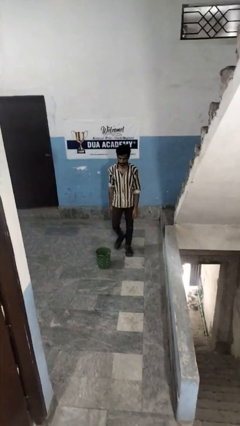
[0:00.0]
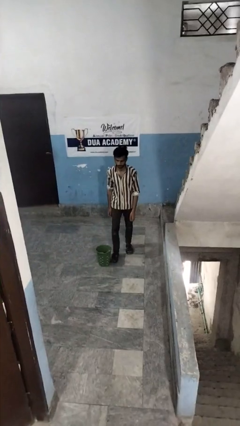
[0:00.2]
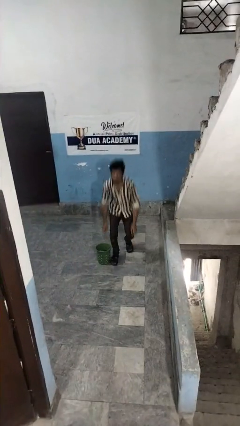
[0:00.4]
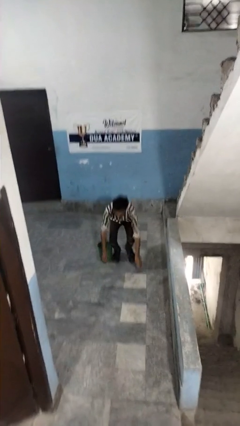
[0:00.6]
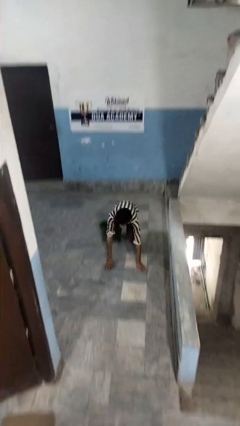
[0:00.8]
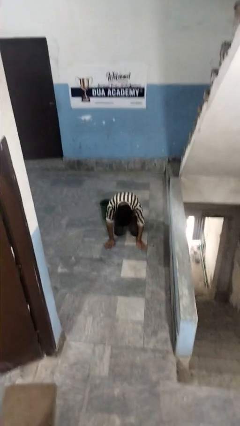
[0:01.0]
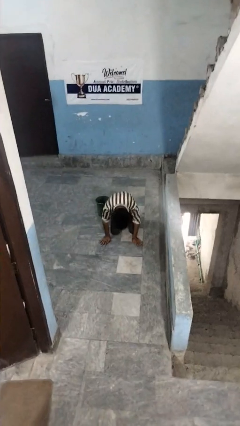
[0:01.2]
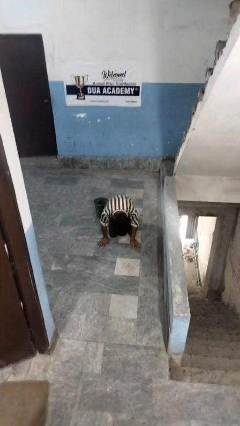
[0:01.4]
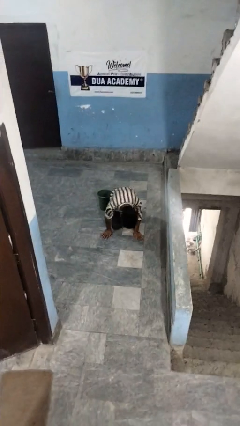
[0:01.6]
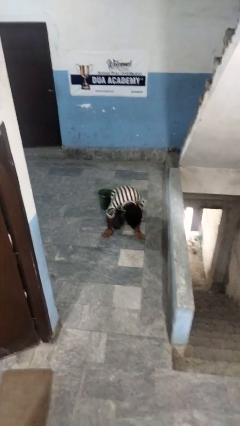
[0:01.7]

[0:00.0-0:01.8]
person trips on object on floor

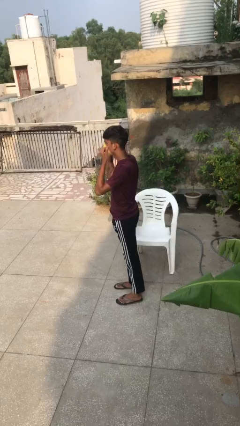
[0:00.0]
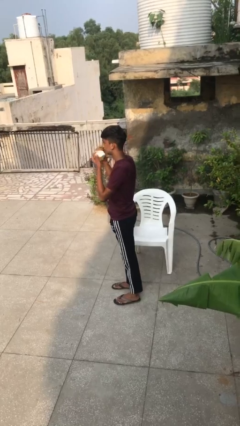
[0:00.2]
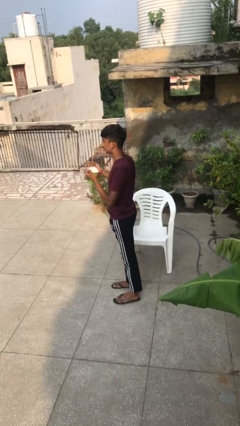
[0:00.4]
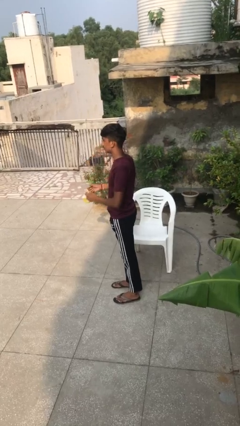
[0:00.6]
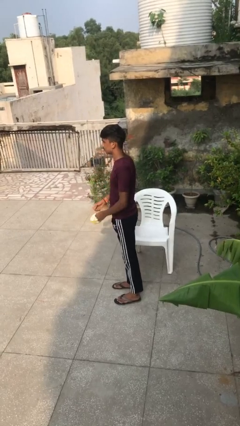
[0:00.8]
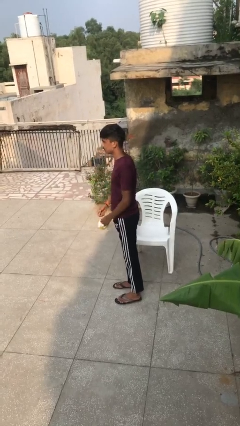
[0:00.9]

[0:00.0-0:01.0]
person takes off facemask

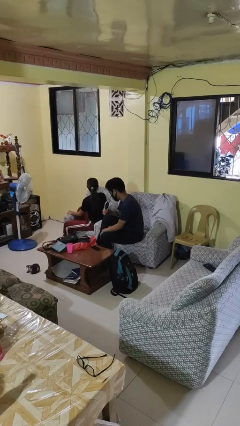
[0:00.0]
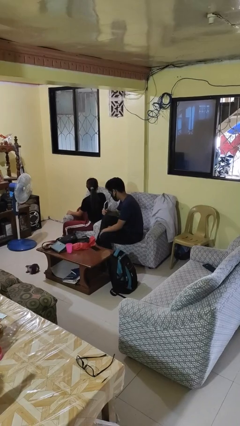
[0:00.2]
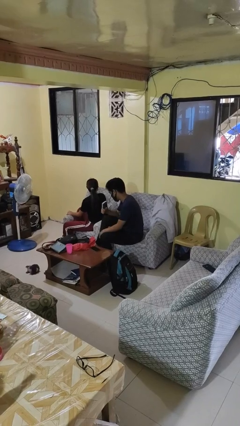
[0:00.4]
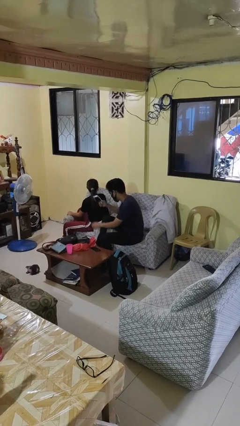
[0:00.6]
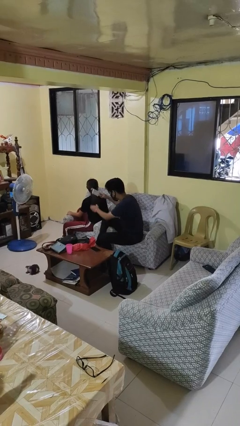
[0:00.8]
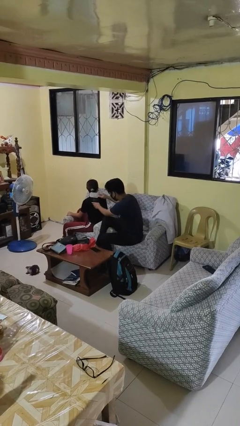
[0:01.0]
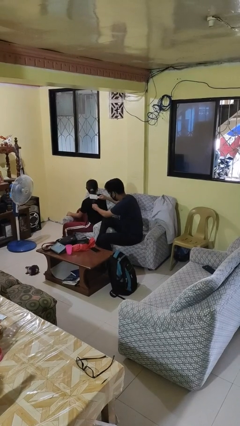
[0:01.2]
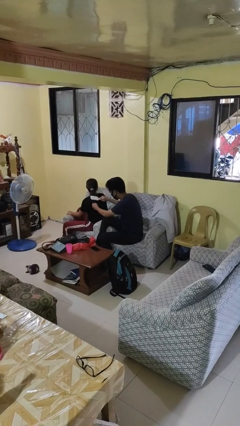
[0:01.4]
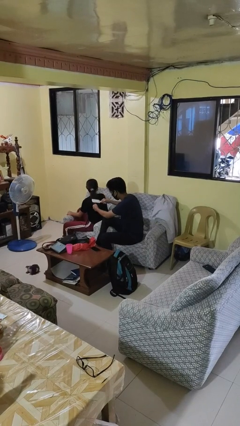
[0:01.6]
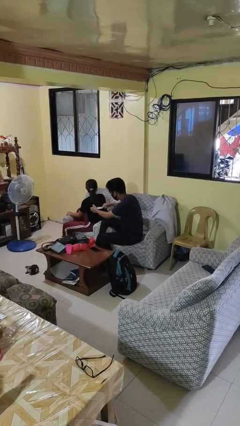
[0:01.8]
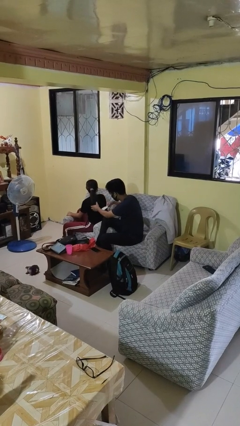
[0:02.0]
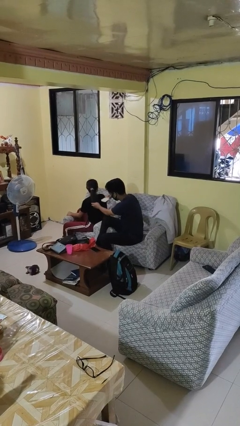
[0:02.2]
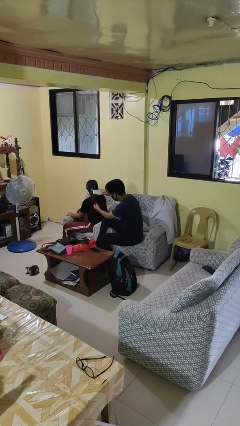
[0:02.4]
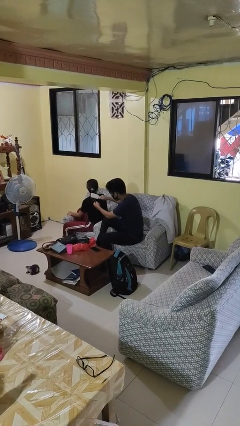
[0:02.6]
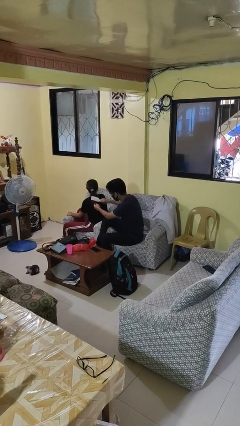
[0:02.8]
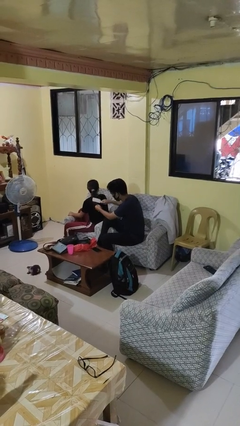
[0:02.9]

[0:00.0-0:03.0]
person brushes hair of person

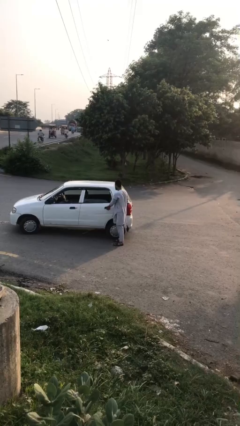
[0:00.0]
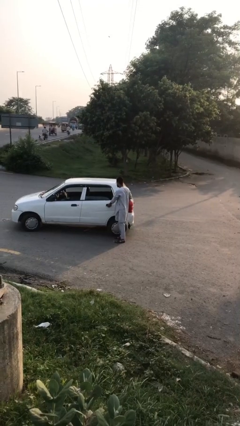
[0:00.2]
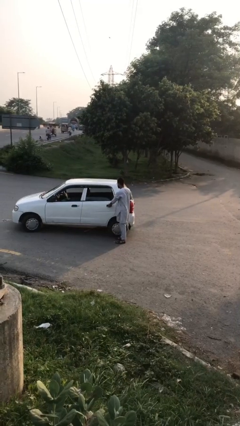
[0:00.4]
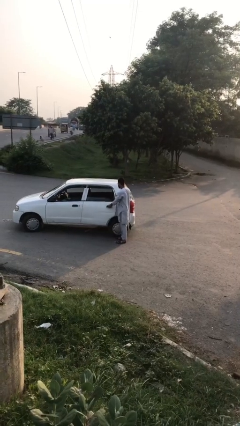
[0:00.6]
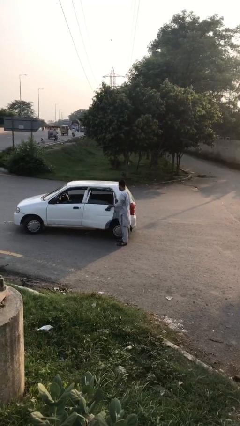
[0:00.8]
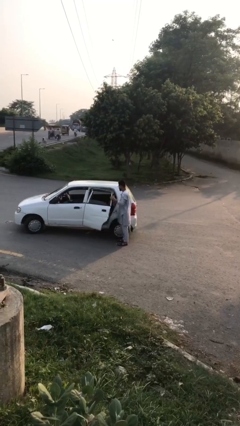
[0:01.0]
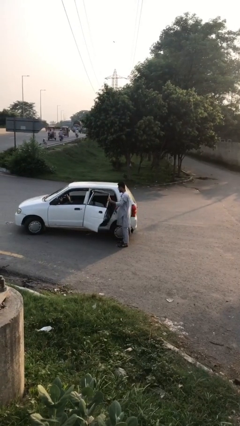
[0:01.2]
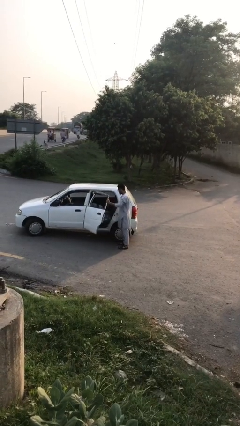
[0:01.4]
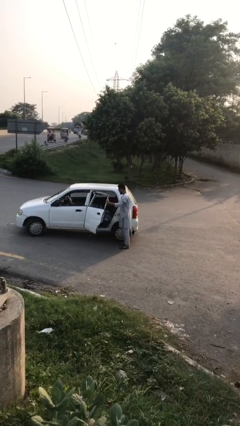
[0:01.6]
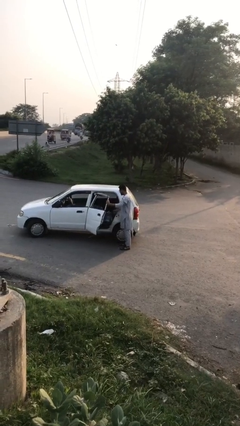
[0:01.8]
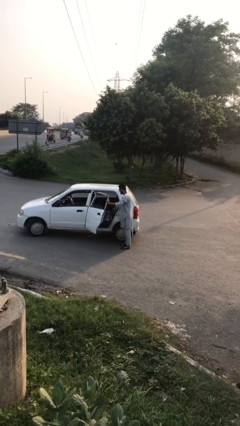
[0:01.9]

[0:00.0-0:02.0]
person opens car door

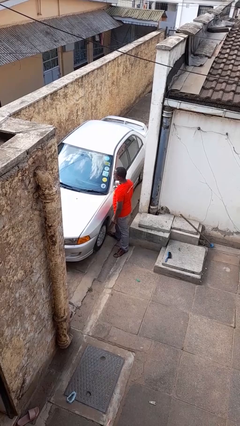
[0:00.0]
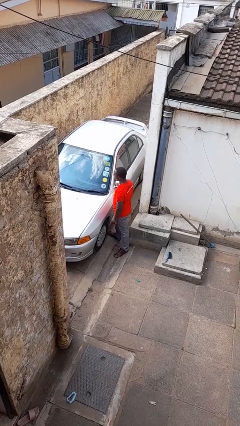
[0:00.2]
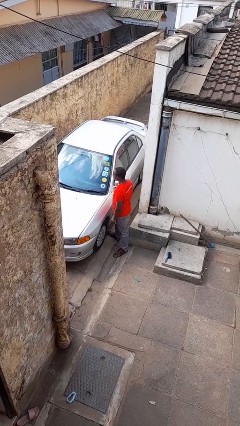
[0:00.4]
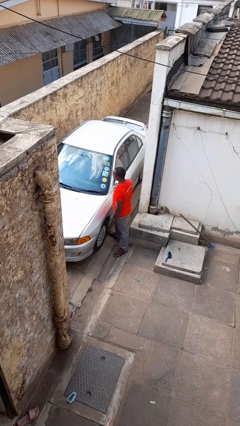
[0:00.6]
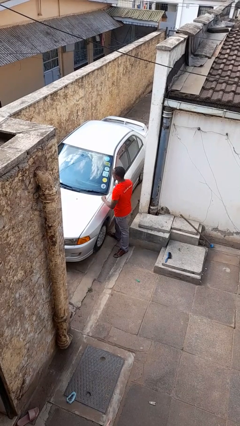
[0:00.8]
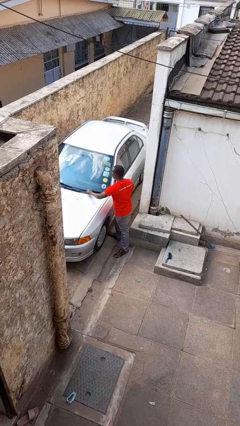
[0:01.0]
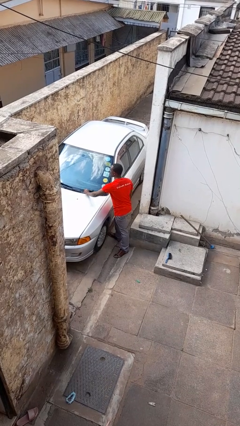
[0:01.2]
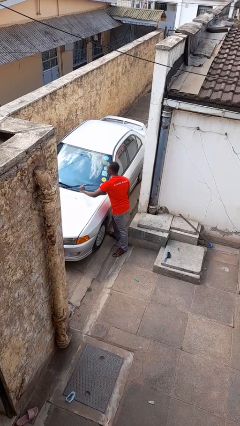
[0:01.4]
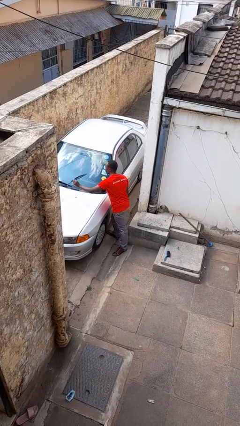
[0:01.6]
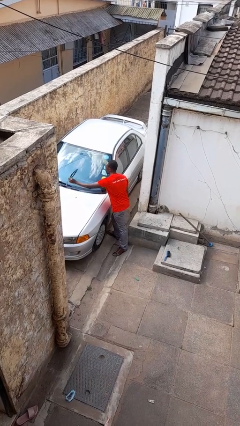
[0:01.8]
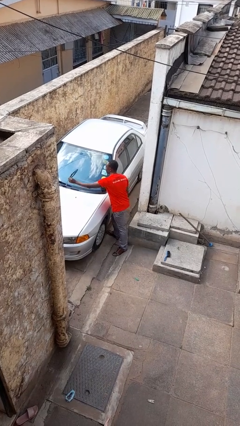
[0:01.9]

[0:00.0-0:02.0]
person flips up car wipers

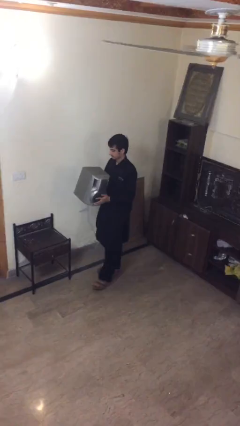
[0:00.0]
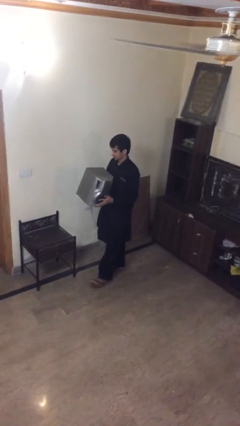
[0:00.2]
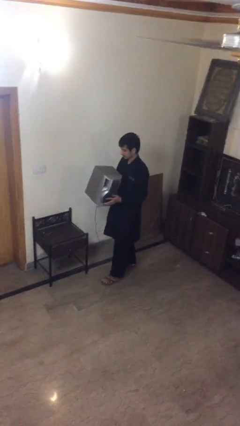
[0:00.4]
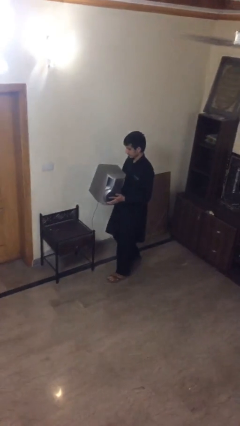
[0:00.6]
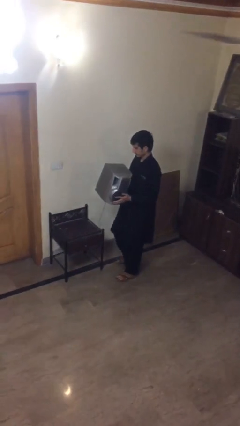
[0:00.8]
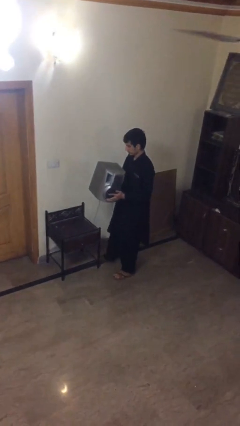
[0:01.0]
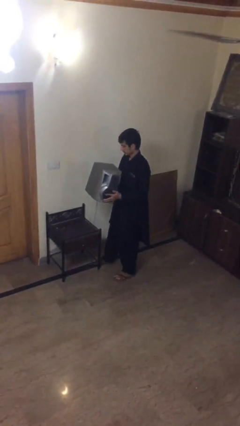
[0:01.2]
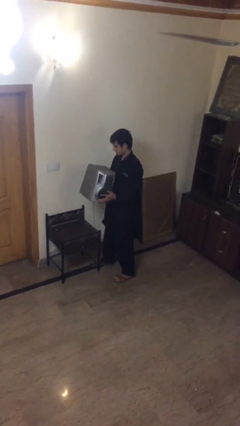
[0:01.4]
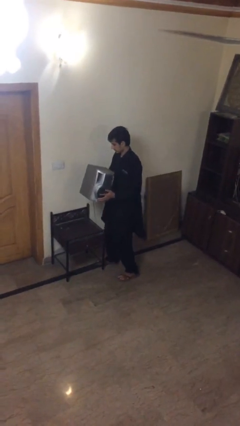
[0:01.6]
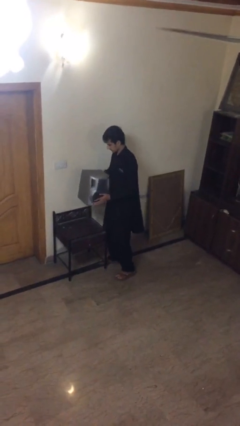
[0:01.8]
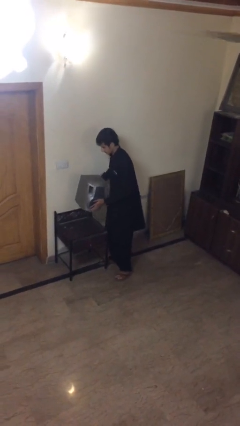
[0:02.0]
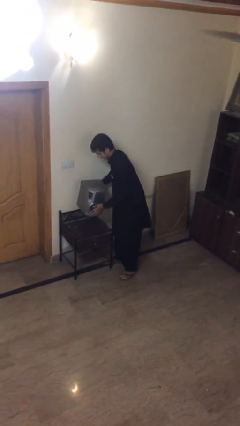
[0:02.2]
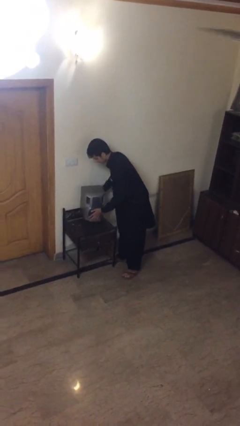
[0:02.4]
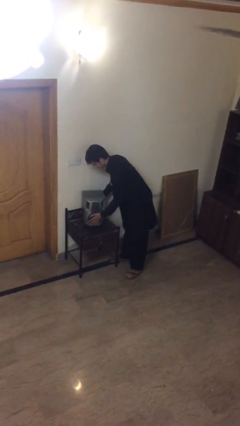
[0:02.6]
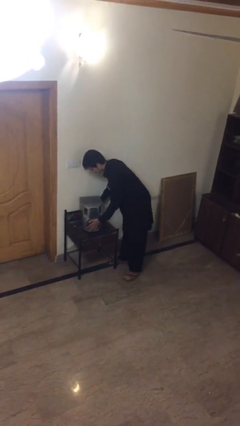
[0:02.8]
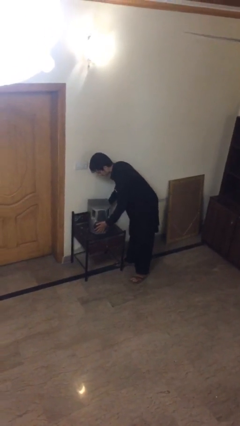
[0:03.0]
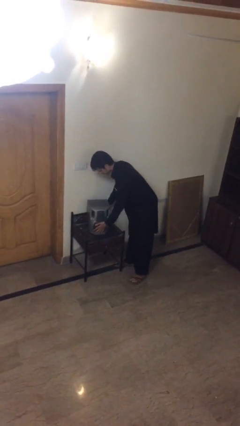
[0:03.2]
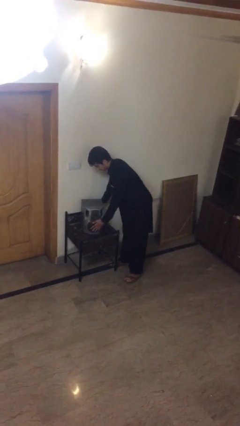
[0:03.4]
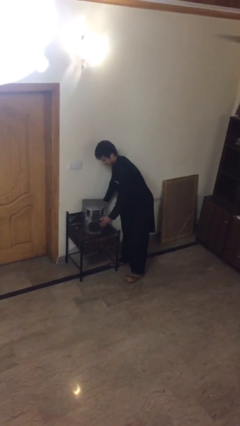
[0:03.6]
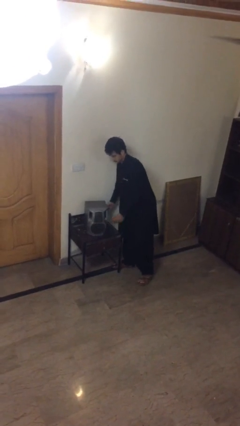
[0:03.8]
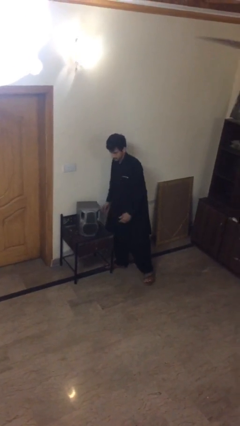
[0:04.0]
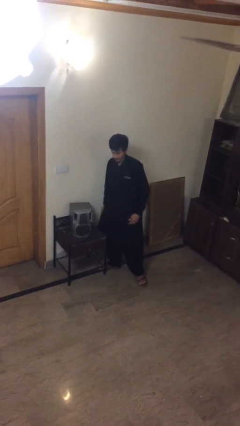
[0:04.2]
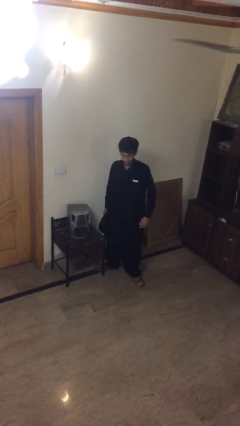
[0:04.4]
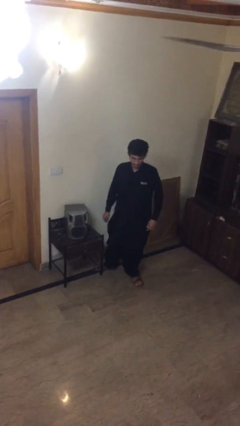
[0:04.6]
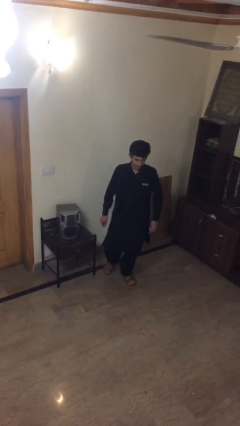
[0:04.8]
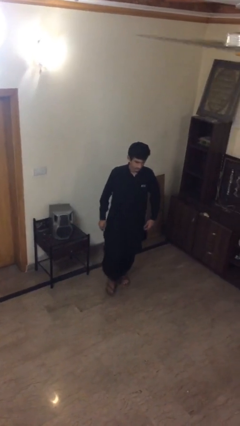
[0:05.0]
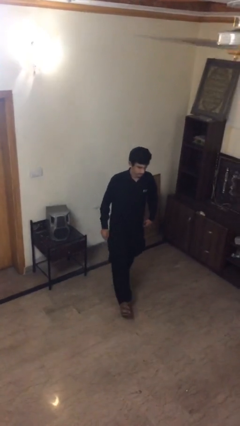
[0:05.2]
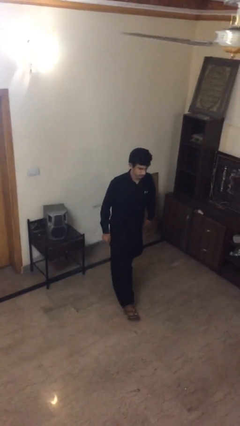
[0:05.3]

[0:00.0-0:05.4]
person puts down object on table

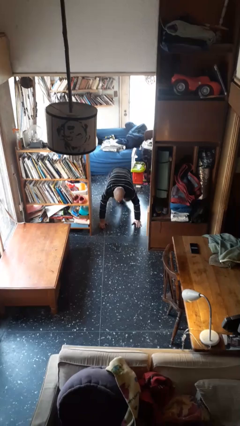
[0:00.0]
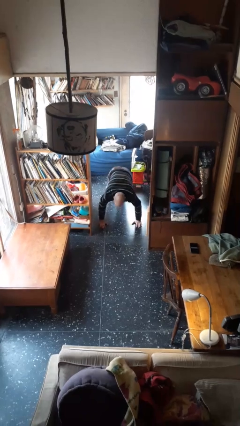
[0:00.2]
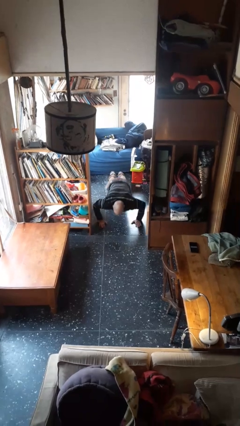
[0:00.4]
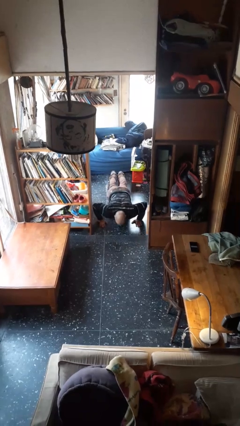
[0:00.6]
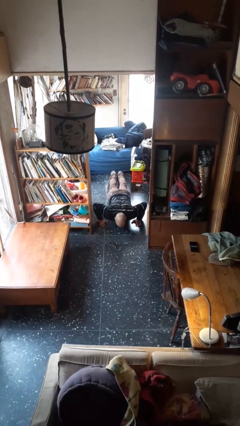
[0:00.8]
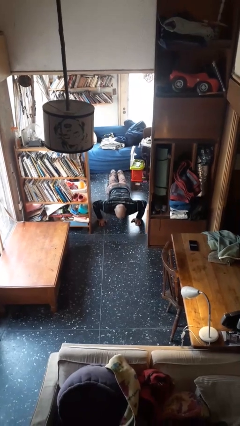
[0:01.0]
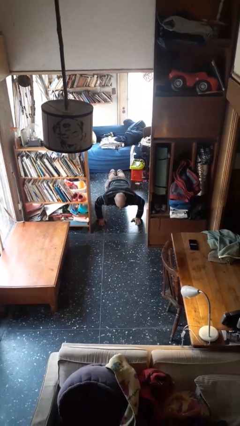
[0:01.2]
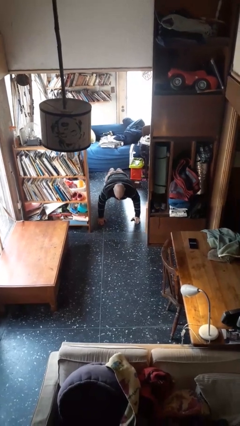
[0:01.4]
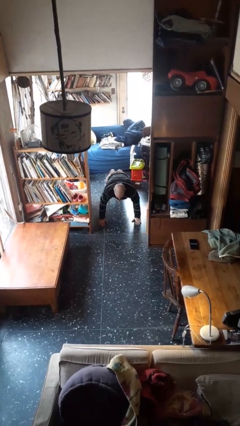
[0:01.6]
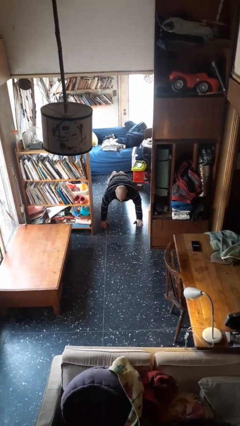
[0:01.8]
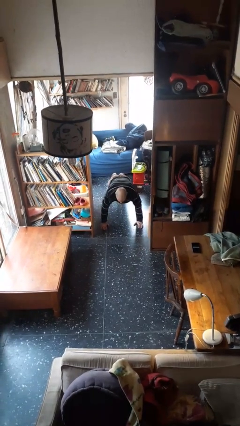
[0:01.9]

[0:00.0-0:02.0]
person exercises with pushup
